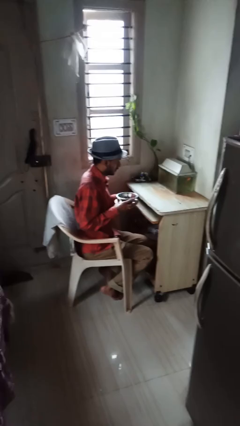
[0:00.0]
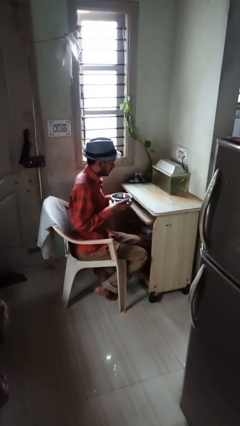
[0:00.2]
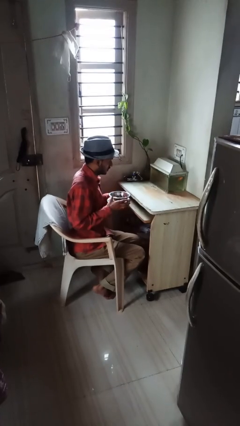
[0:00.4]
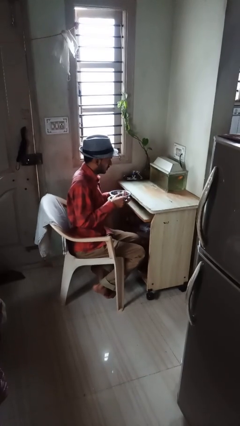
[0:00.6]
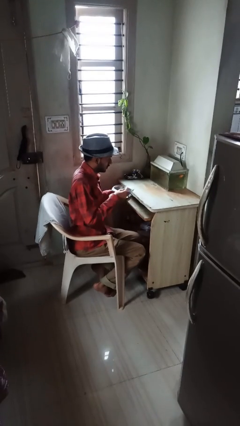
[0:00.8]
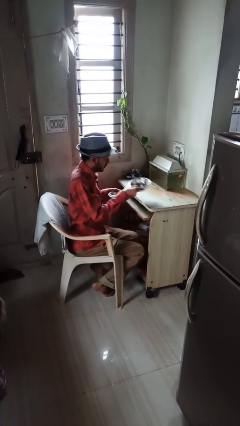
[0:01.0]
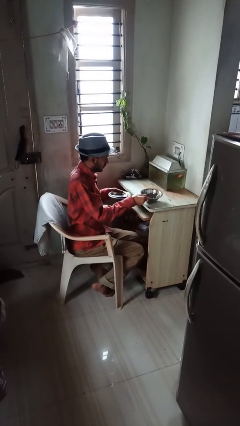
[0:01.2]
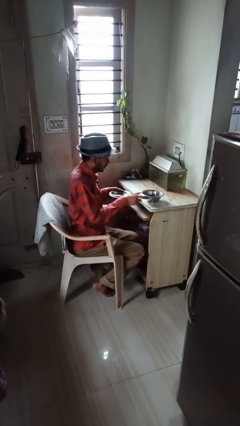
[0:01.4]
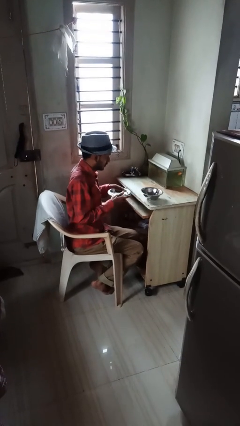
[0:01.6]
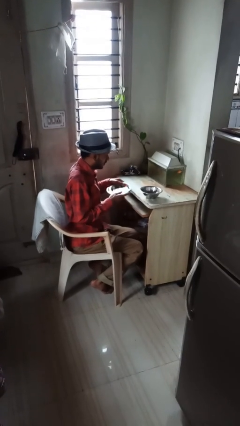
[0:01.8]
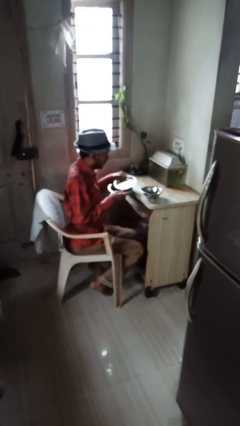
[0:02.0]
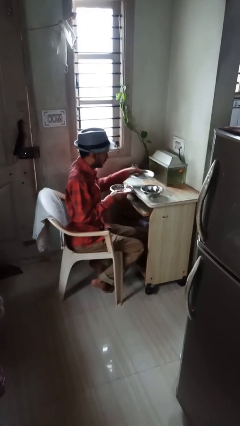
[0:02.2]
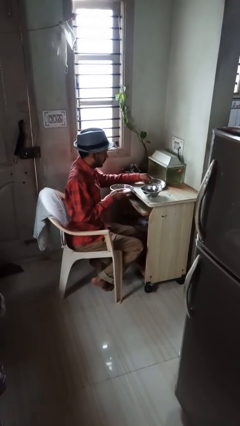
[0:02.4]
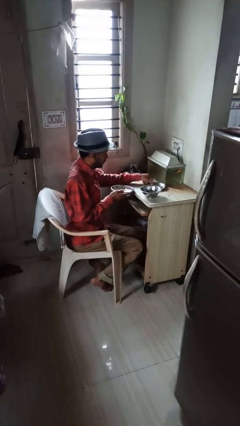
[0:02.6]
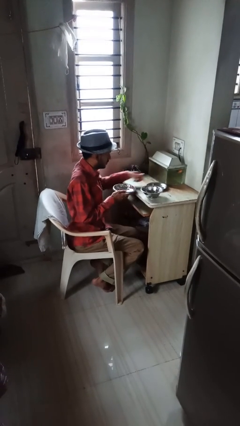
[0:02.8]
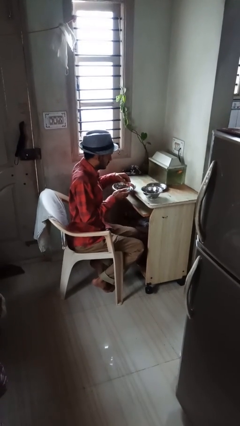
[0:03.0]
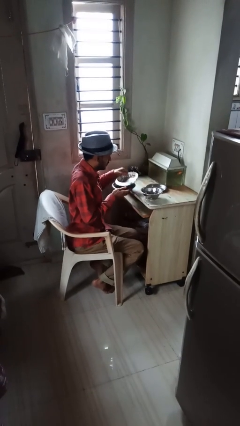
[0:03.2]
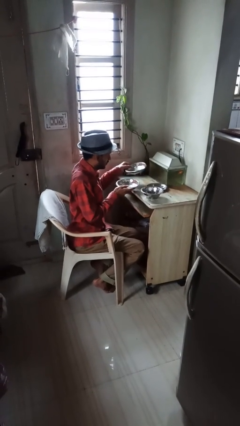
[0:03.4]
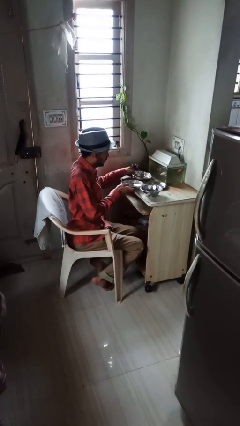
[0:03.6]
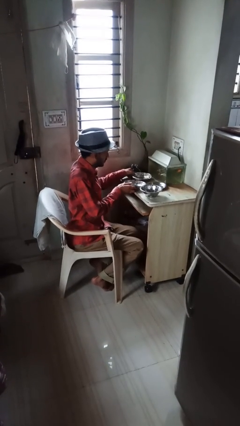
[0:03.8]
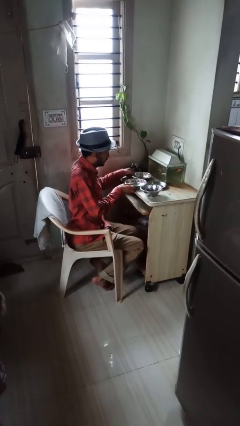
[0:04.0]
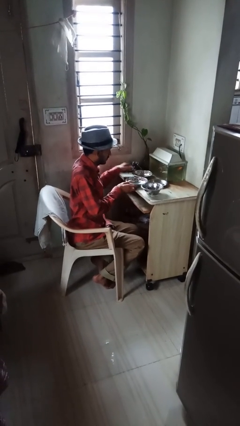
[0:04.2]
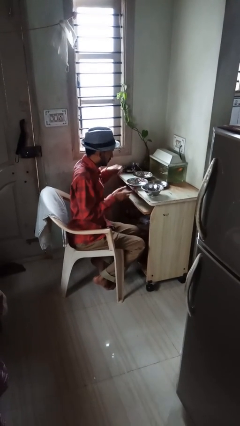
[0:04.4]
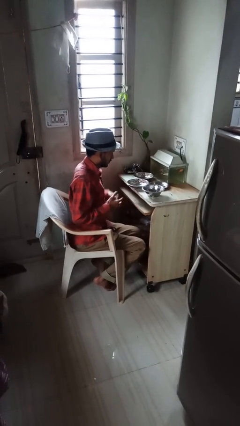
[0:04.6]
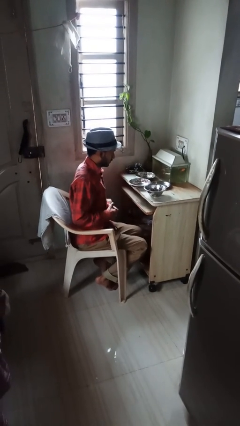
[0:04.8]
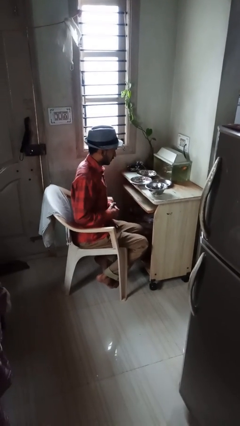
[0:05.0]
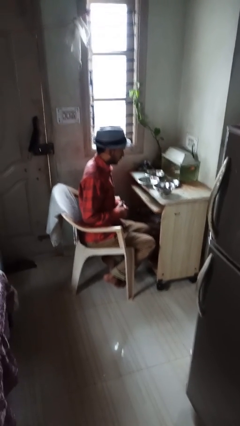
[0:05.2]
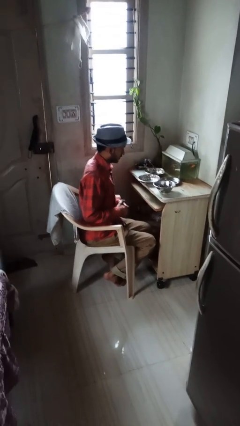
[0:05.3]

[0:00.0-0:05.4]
person sets table

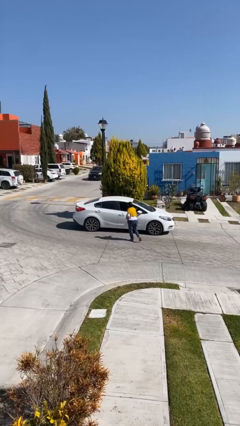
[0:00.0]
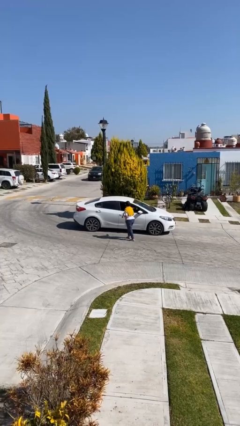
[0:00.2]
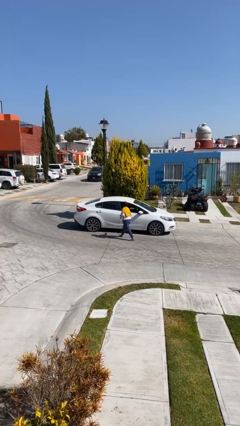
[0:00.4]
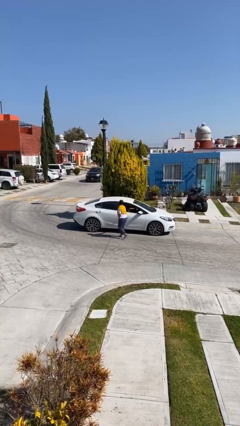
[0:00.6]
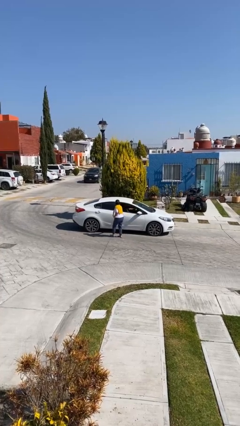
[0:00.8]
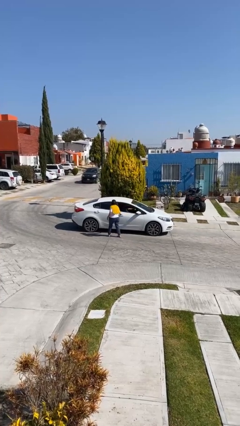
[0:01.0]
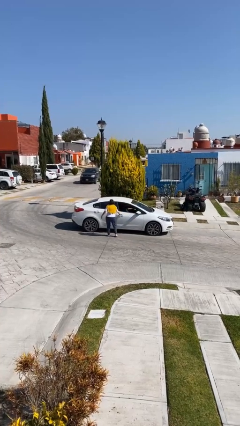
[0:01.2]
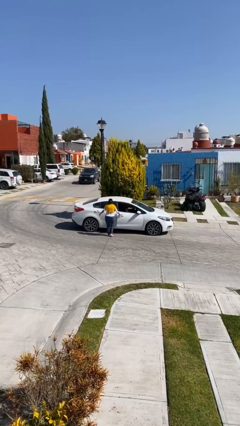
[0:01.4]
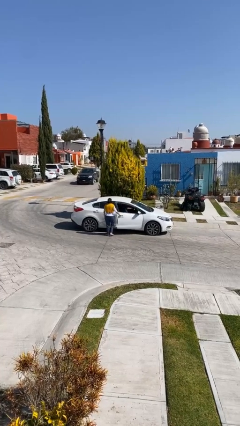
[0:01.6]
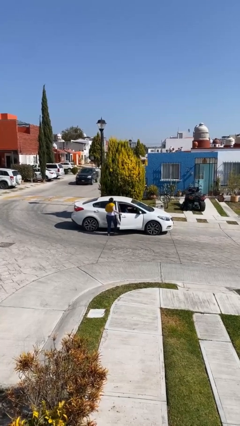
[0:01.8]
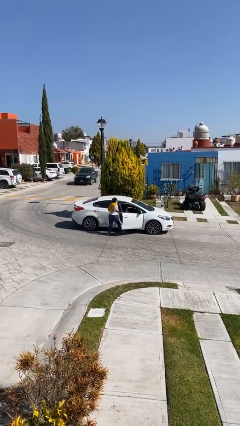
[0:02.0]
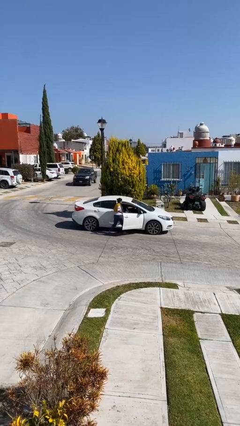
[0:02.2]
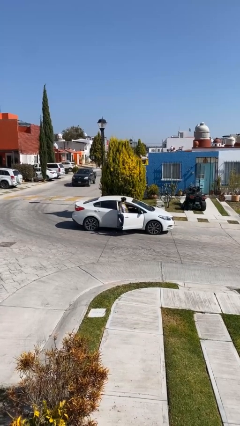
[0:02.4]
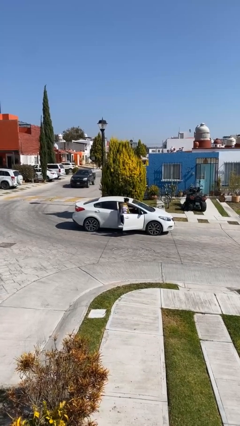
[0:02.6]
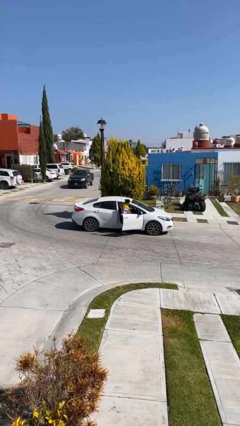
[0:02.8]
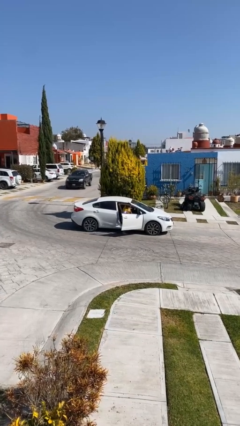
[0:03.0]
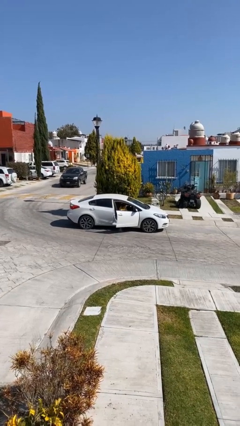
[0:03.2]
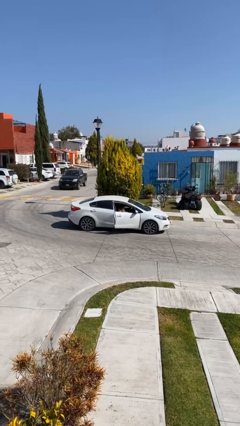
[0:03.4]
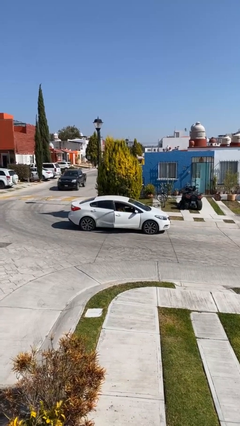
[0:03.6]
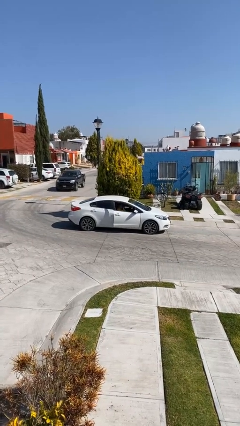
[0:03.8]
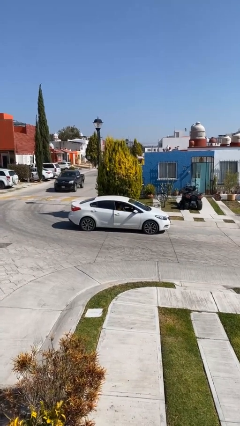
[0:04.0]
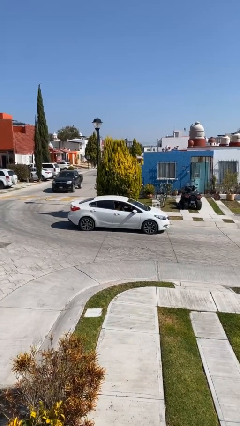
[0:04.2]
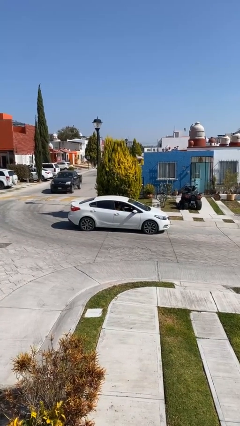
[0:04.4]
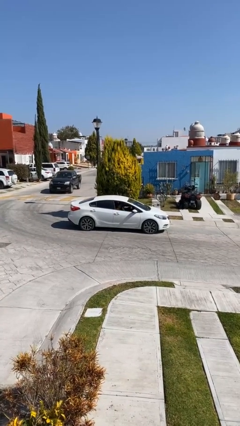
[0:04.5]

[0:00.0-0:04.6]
car picks up person

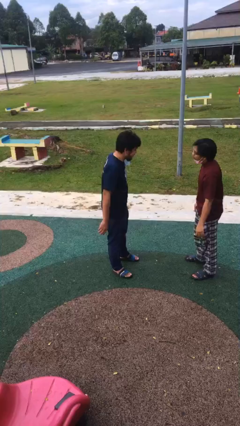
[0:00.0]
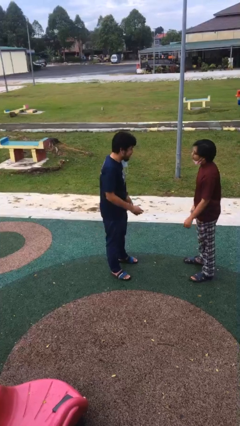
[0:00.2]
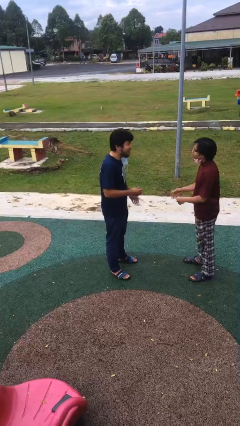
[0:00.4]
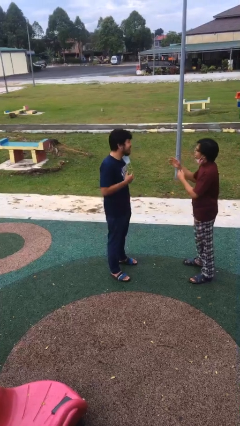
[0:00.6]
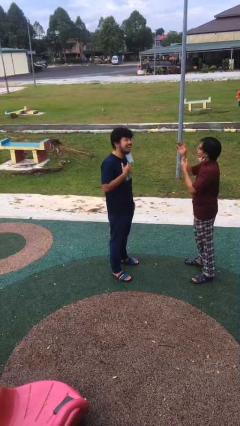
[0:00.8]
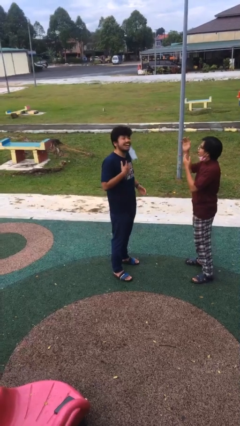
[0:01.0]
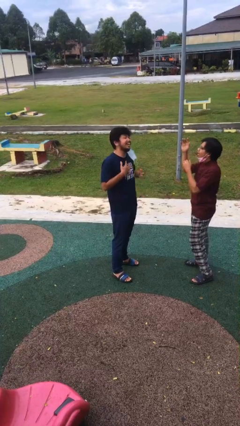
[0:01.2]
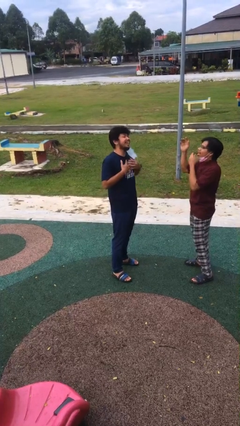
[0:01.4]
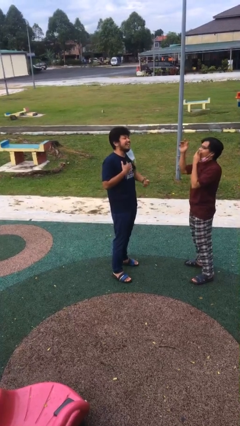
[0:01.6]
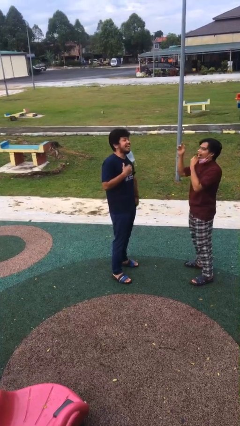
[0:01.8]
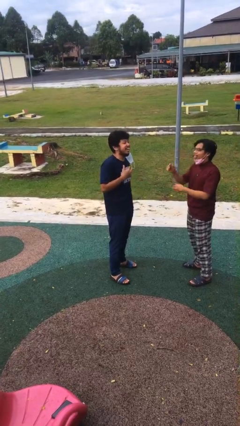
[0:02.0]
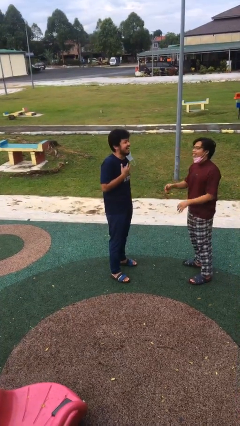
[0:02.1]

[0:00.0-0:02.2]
person laughs with person

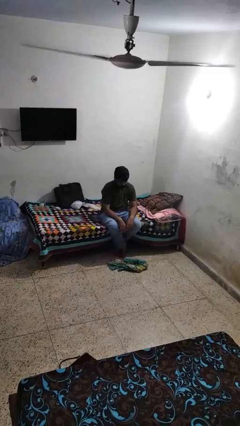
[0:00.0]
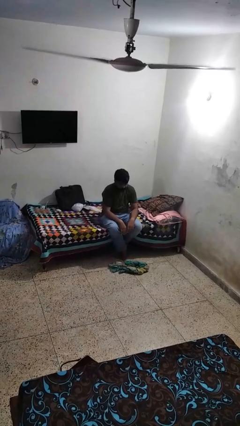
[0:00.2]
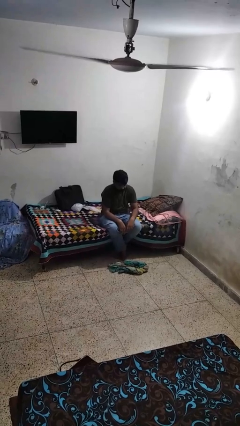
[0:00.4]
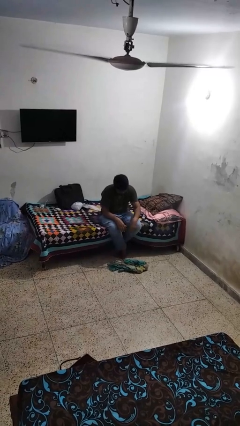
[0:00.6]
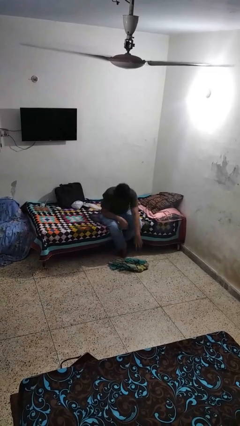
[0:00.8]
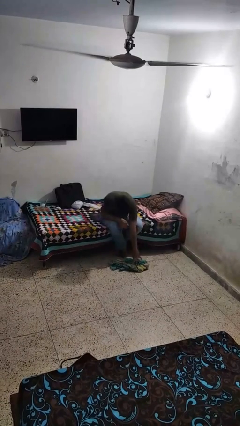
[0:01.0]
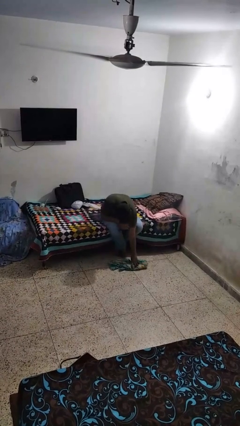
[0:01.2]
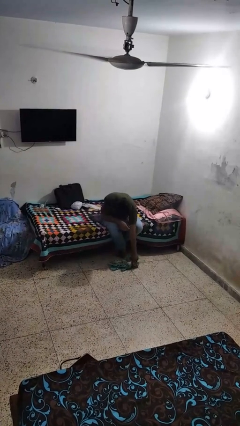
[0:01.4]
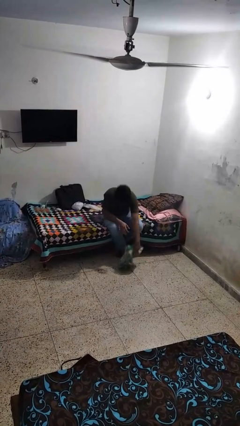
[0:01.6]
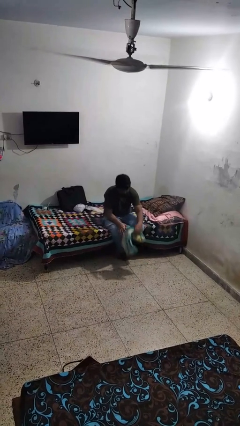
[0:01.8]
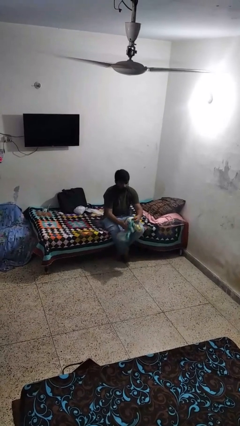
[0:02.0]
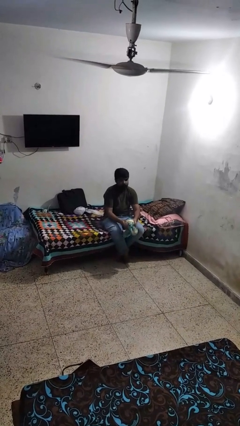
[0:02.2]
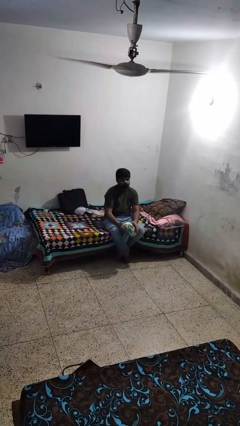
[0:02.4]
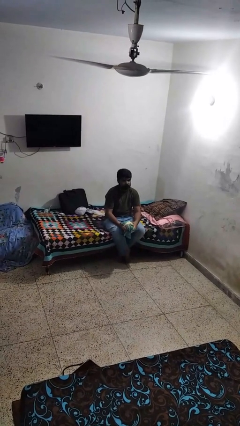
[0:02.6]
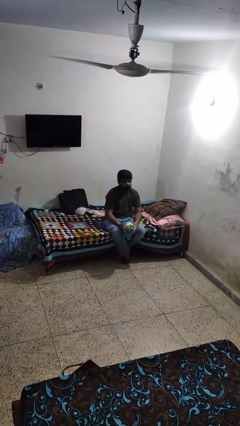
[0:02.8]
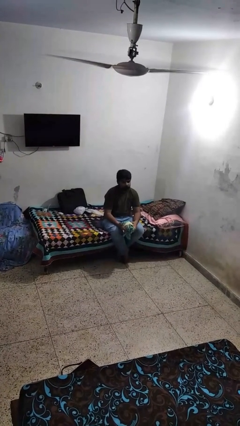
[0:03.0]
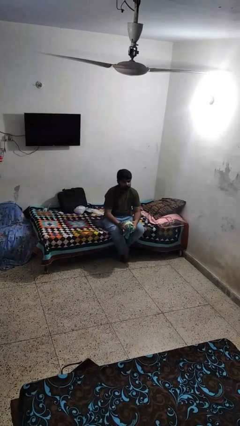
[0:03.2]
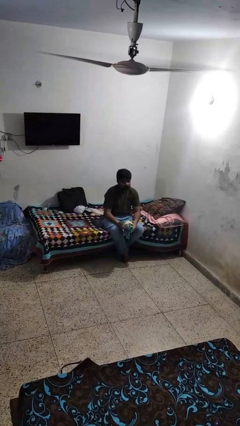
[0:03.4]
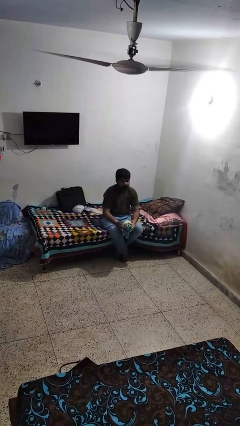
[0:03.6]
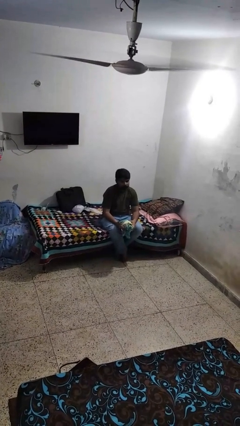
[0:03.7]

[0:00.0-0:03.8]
person picks up object from floor

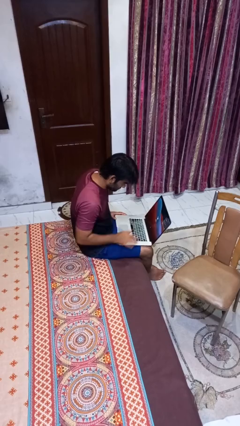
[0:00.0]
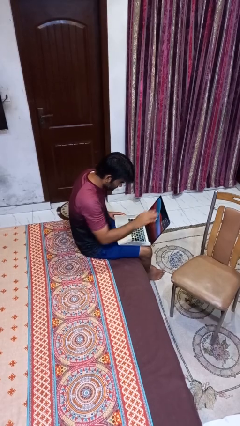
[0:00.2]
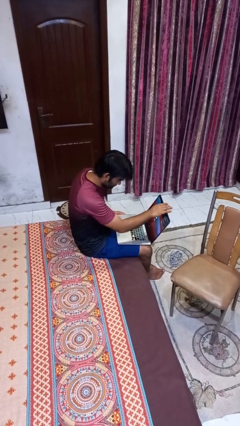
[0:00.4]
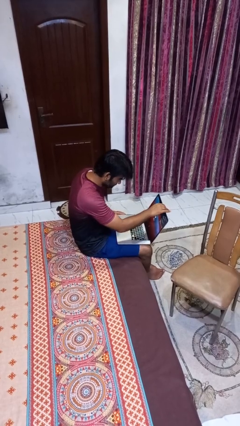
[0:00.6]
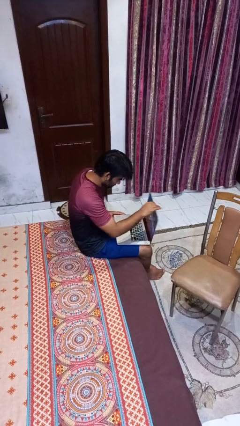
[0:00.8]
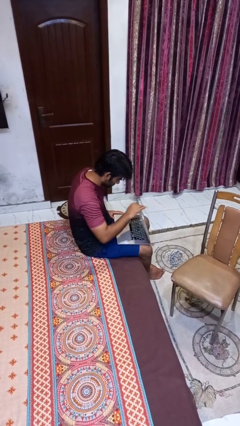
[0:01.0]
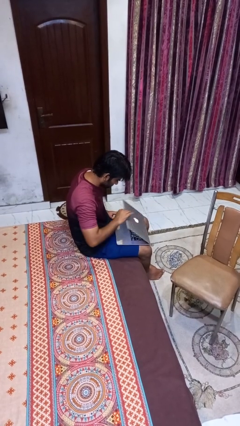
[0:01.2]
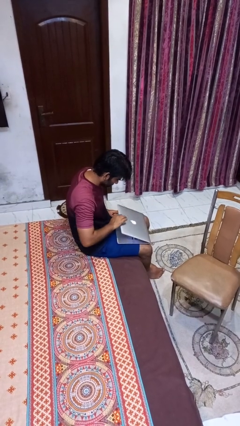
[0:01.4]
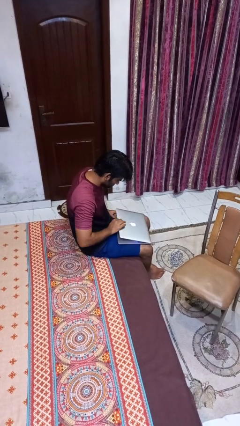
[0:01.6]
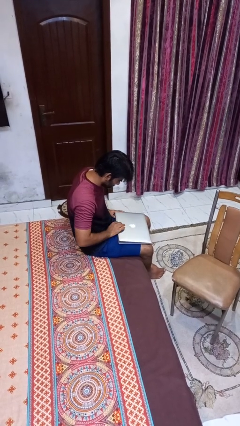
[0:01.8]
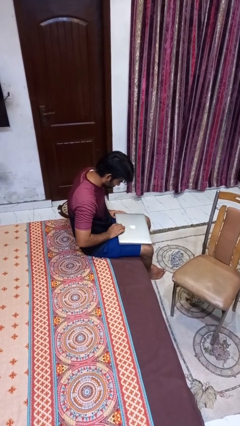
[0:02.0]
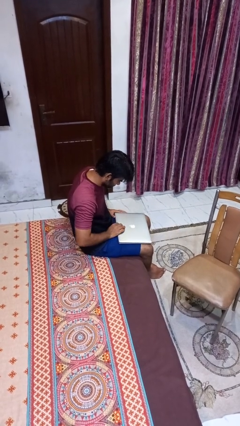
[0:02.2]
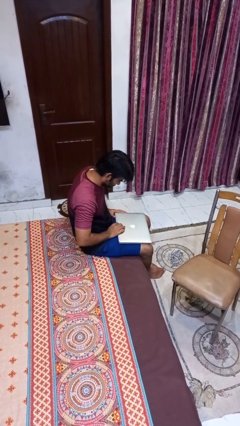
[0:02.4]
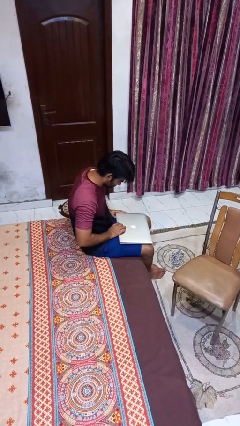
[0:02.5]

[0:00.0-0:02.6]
person closes laptop
